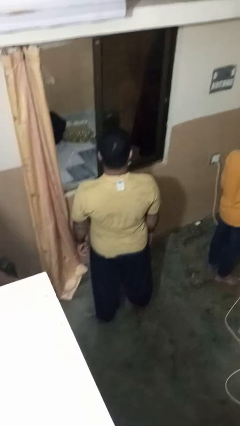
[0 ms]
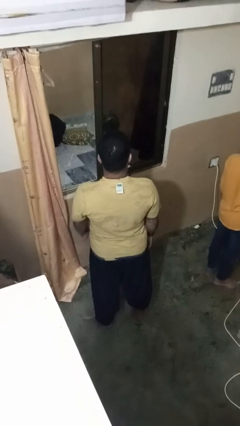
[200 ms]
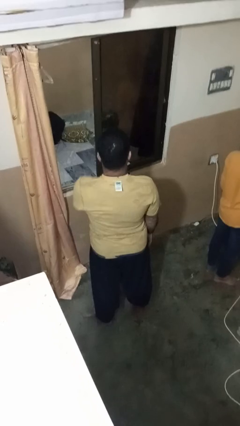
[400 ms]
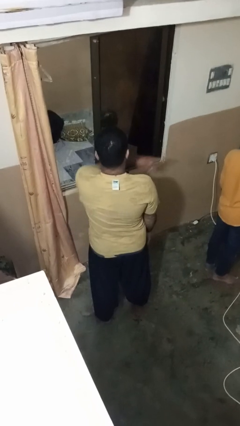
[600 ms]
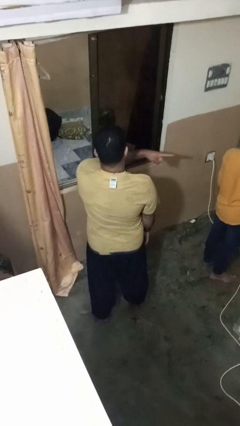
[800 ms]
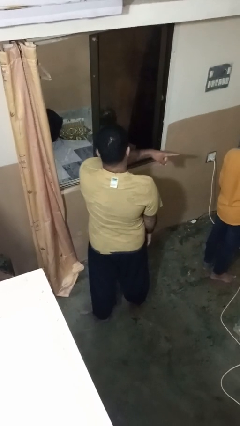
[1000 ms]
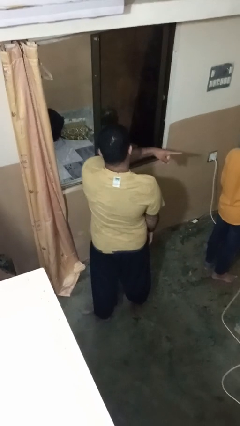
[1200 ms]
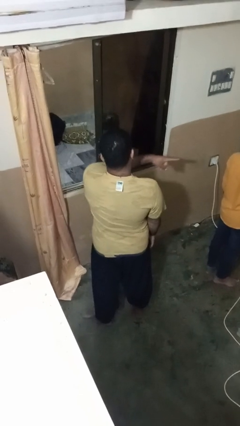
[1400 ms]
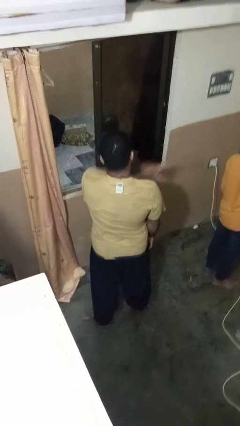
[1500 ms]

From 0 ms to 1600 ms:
person points at person

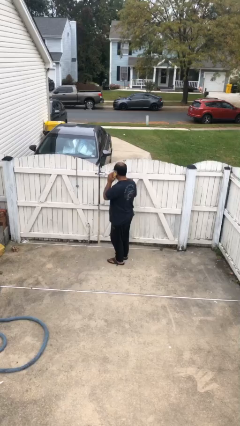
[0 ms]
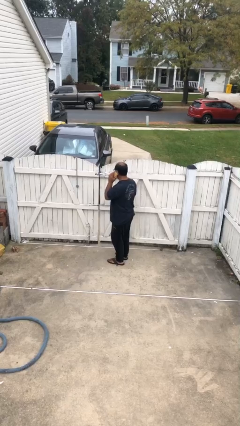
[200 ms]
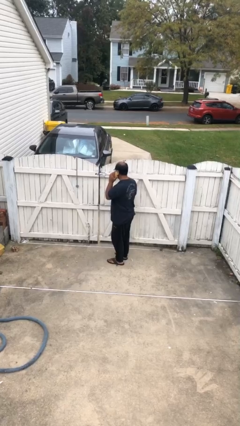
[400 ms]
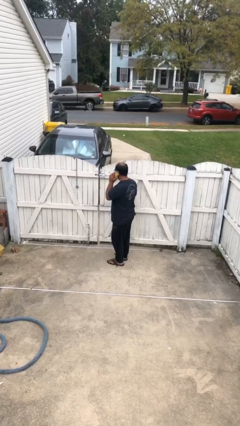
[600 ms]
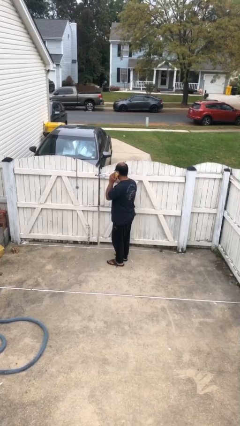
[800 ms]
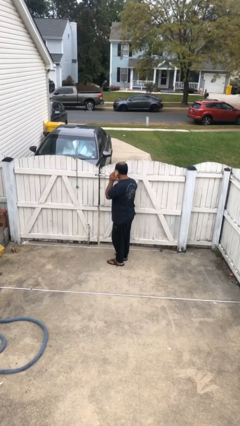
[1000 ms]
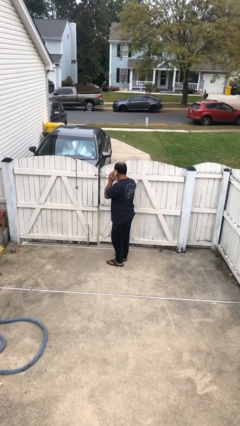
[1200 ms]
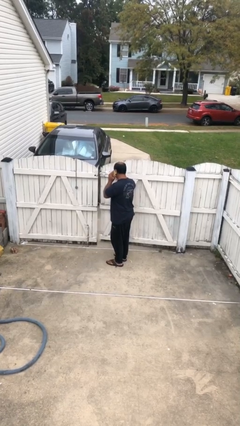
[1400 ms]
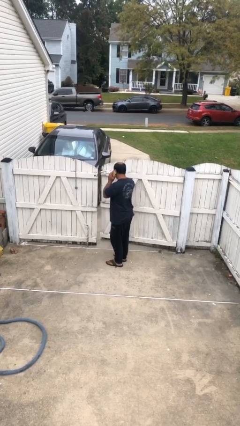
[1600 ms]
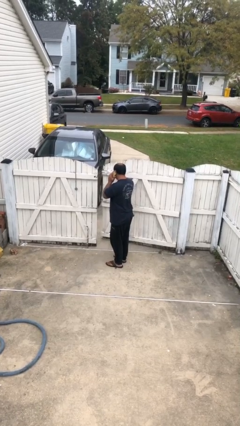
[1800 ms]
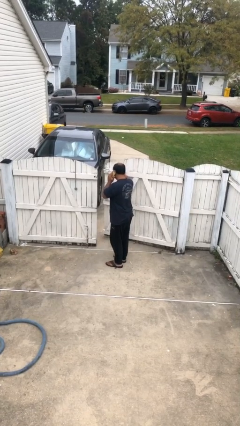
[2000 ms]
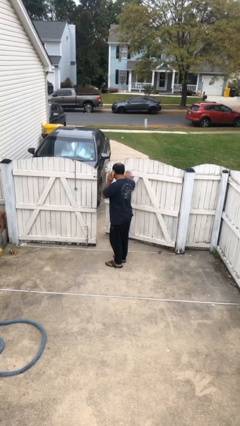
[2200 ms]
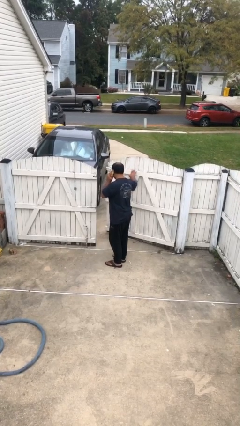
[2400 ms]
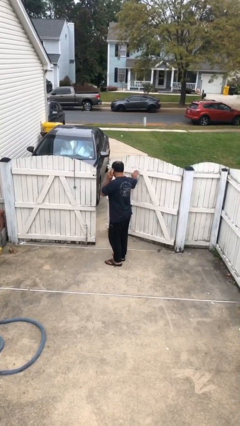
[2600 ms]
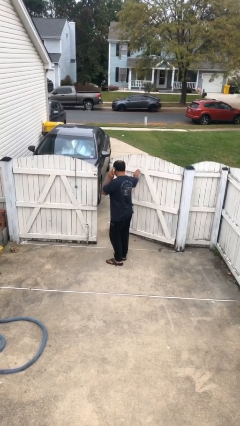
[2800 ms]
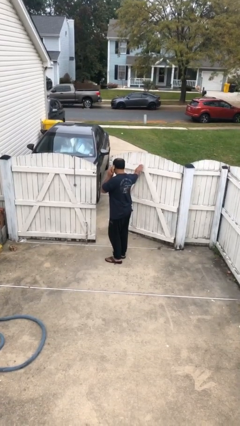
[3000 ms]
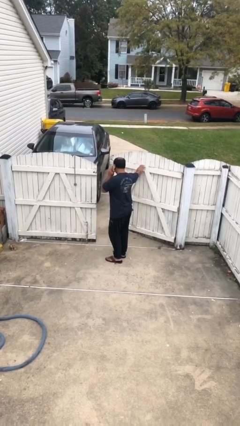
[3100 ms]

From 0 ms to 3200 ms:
person opens facility door

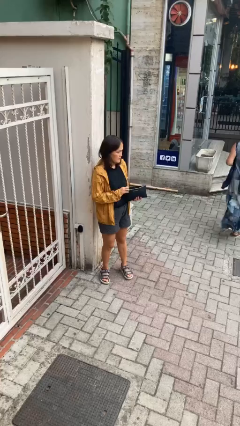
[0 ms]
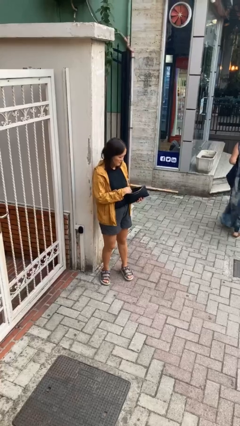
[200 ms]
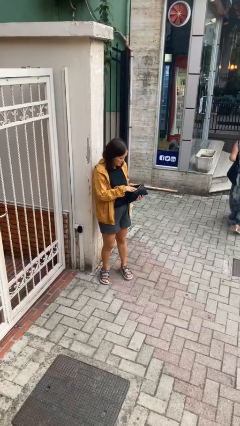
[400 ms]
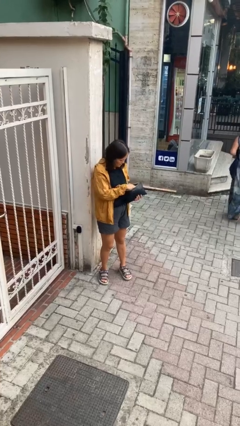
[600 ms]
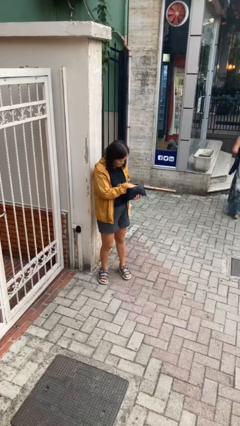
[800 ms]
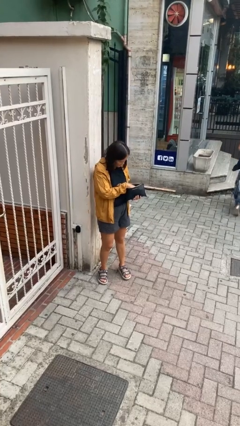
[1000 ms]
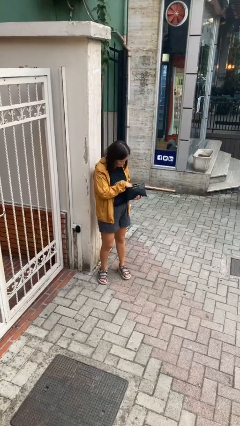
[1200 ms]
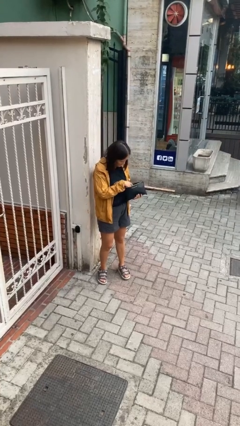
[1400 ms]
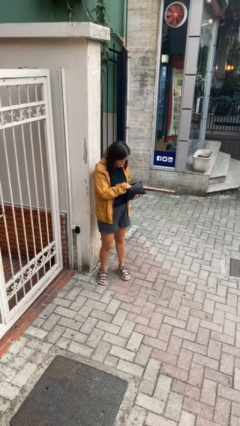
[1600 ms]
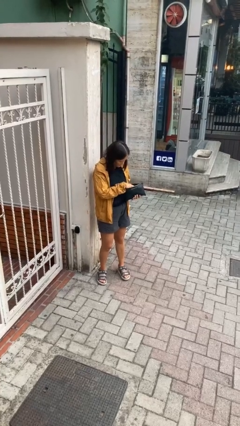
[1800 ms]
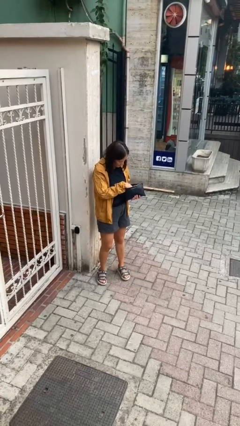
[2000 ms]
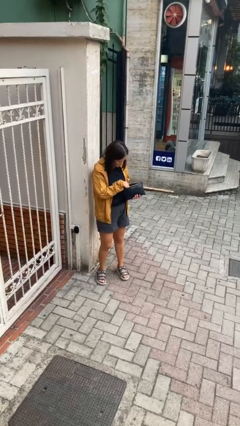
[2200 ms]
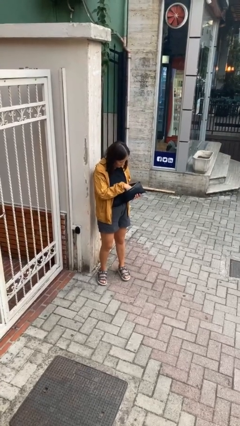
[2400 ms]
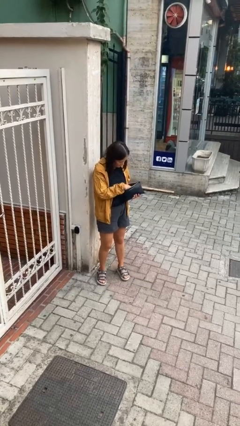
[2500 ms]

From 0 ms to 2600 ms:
person searches in purse

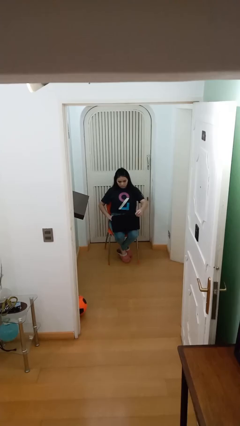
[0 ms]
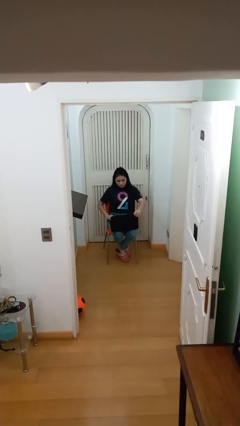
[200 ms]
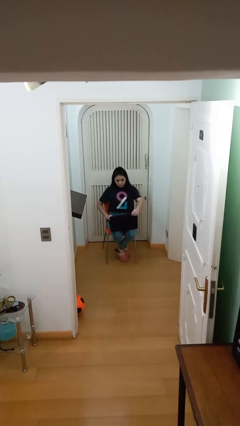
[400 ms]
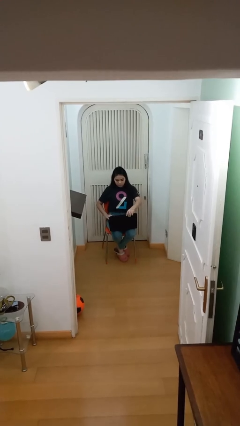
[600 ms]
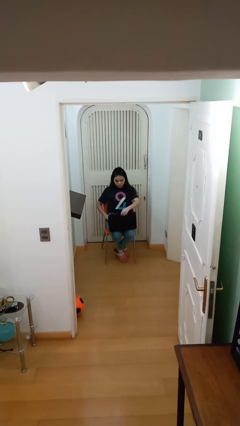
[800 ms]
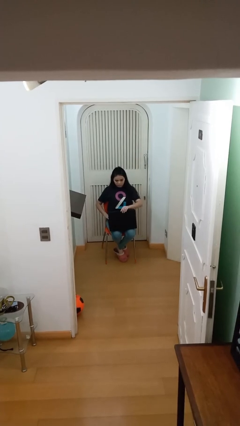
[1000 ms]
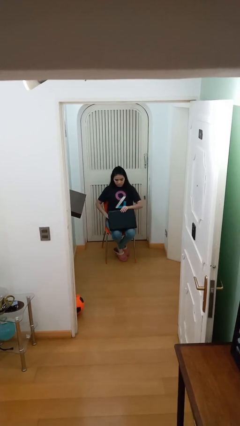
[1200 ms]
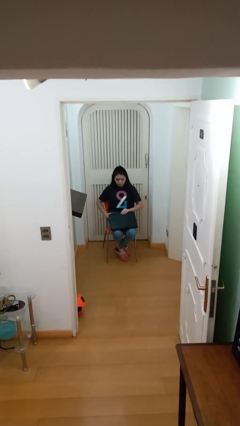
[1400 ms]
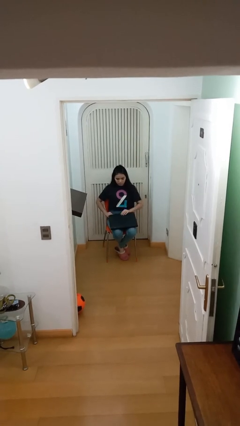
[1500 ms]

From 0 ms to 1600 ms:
person interacts with laptop

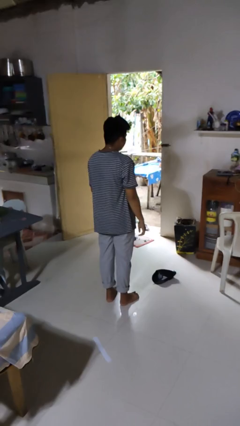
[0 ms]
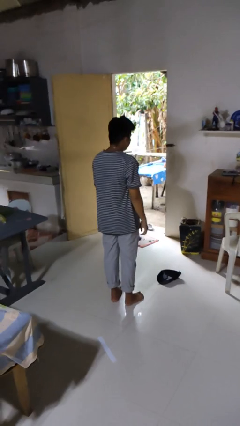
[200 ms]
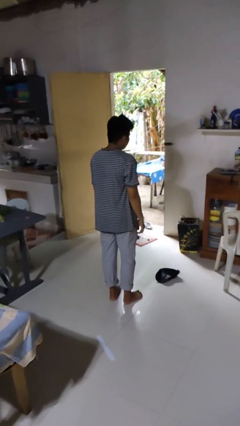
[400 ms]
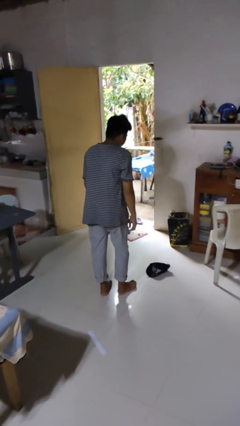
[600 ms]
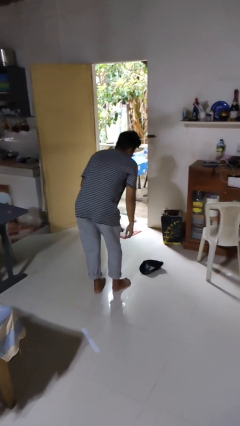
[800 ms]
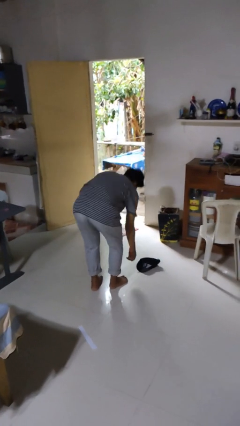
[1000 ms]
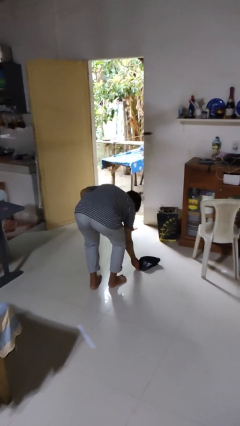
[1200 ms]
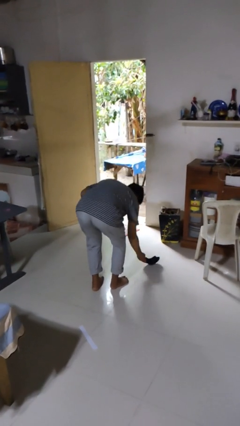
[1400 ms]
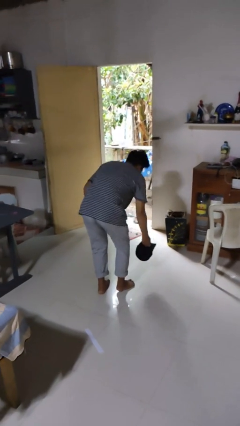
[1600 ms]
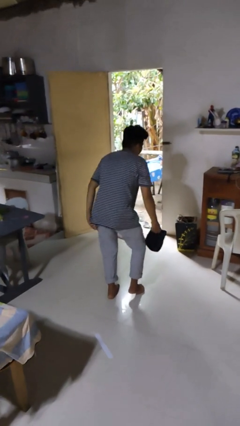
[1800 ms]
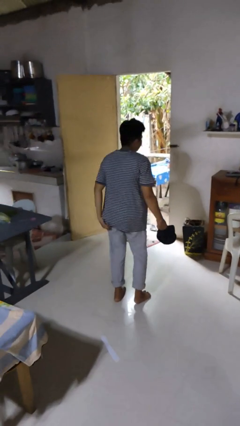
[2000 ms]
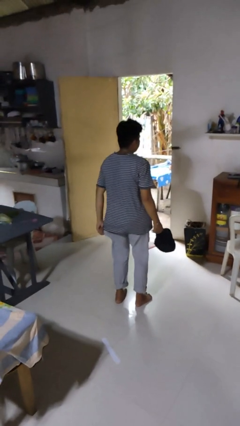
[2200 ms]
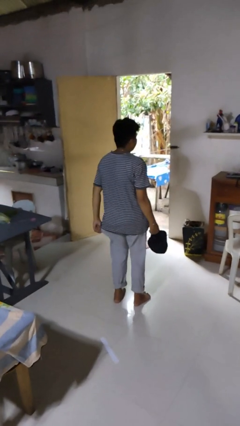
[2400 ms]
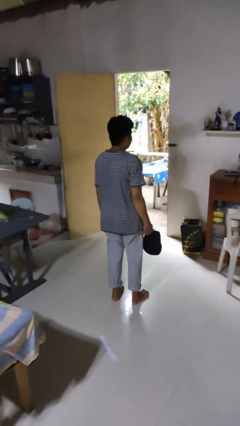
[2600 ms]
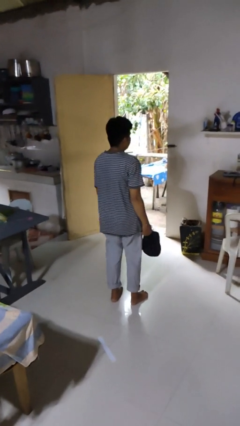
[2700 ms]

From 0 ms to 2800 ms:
person picks up object from floor

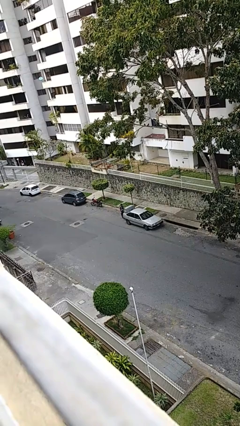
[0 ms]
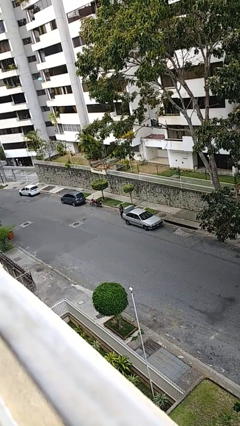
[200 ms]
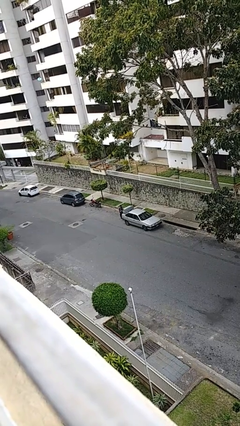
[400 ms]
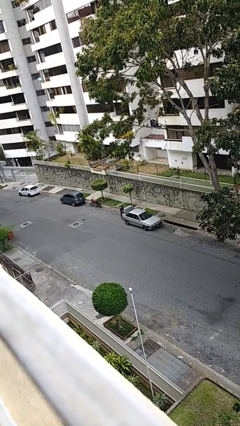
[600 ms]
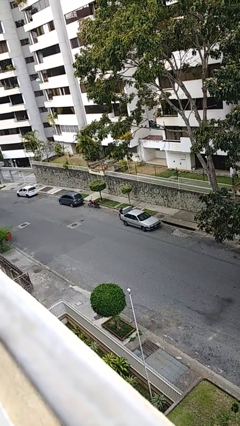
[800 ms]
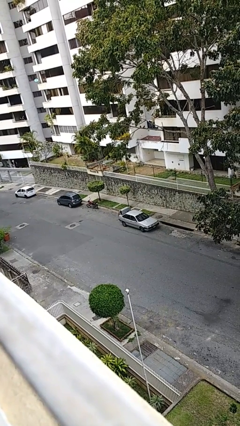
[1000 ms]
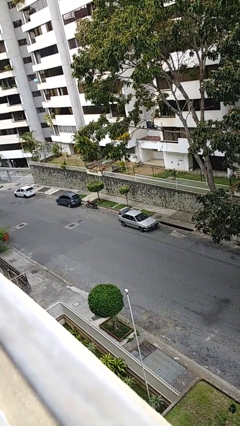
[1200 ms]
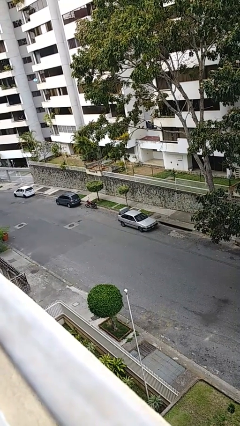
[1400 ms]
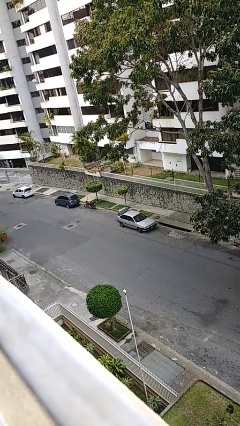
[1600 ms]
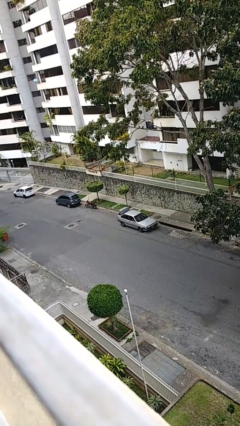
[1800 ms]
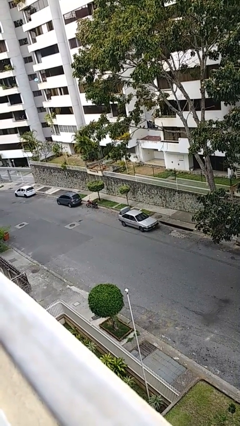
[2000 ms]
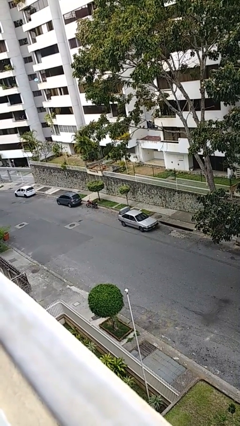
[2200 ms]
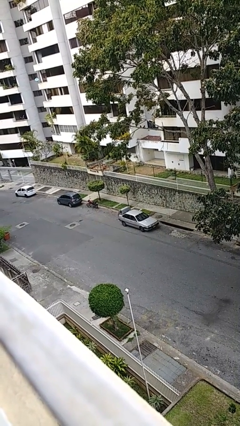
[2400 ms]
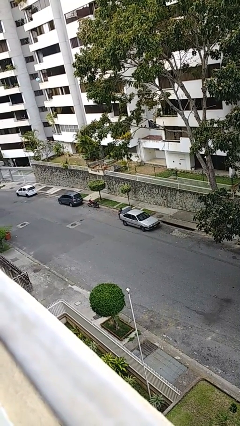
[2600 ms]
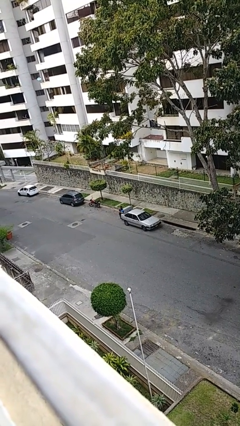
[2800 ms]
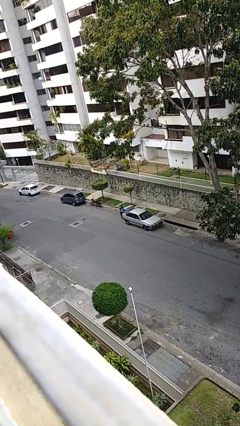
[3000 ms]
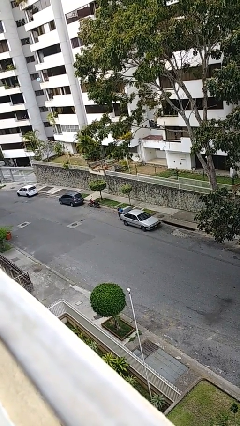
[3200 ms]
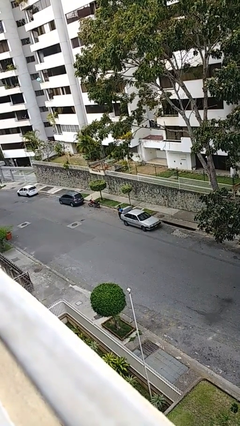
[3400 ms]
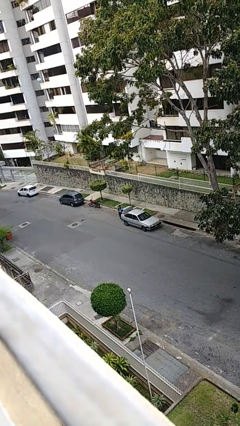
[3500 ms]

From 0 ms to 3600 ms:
person unloads car

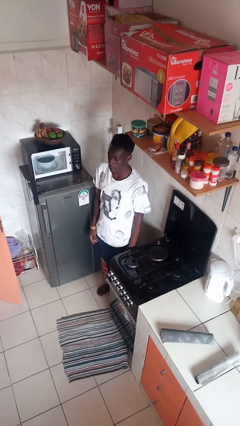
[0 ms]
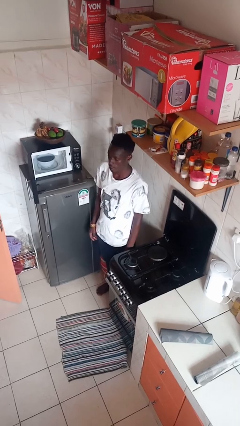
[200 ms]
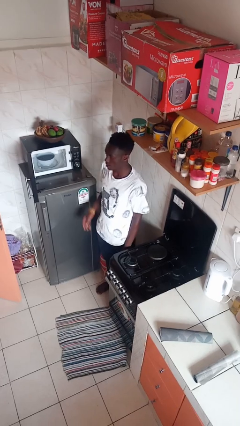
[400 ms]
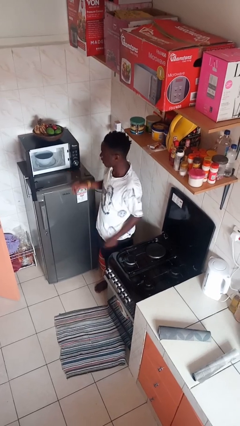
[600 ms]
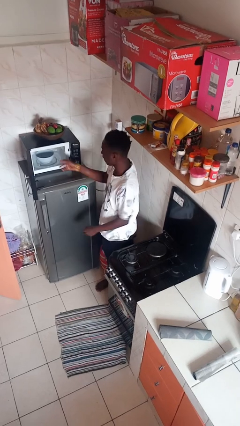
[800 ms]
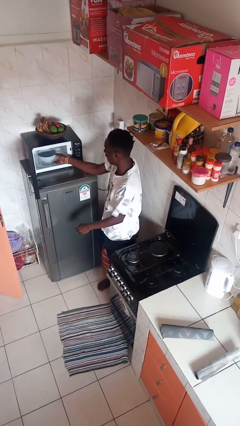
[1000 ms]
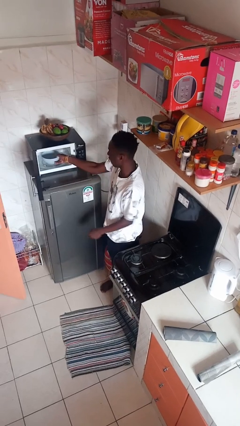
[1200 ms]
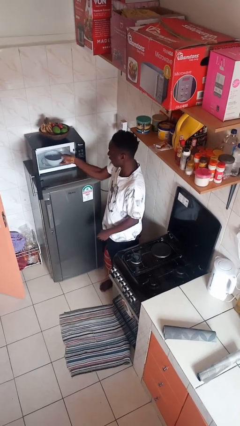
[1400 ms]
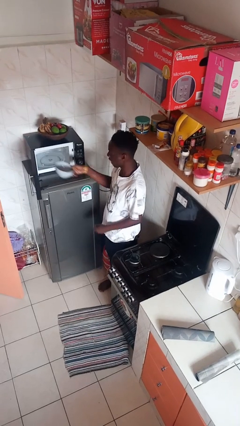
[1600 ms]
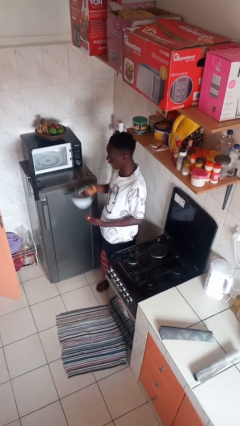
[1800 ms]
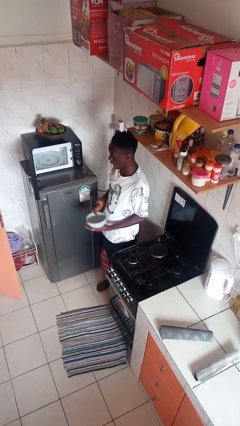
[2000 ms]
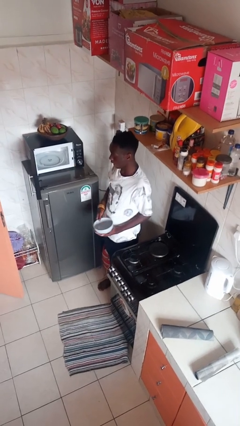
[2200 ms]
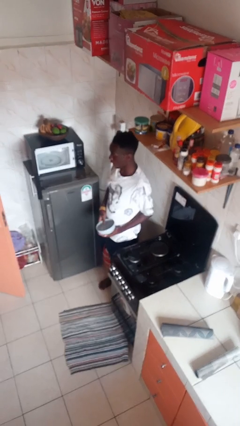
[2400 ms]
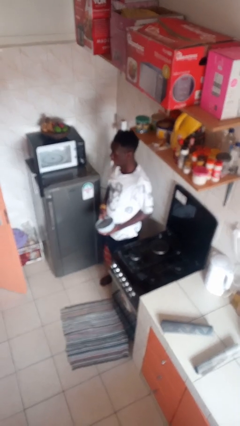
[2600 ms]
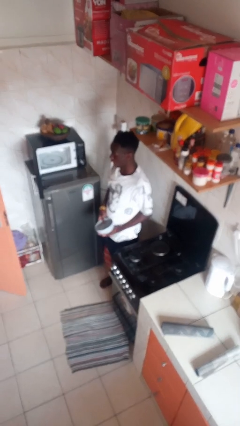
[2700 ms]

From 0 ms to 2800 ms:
person takes object from microwave
